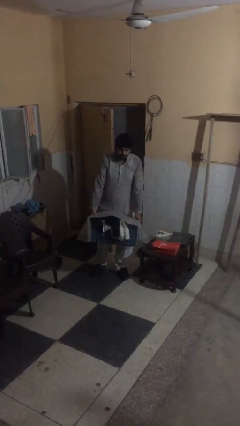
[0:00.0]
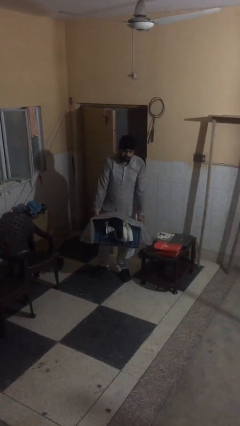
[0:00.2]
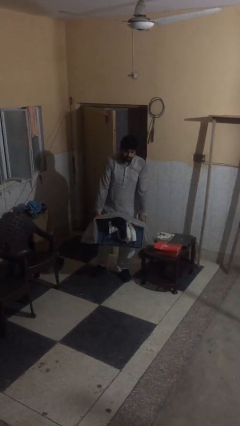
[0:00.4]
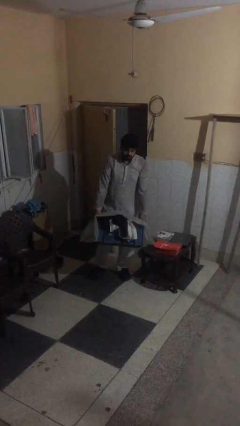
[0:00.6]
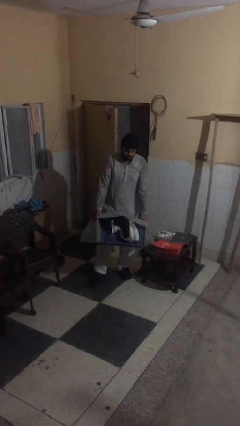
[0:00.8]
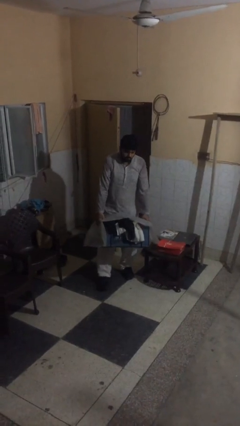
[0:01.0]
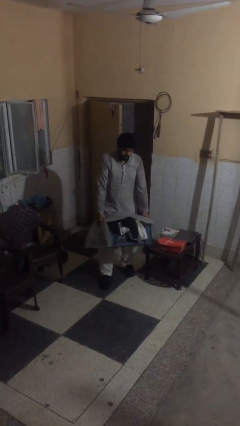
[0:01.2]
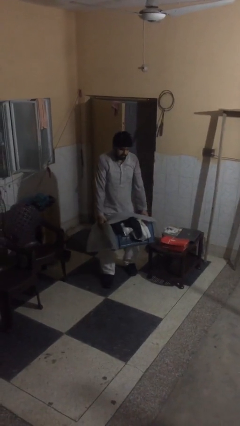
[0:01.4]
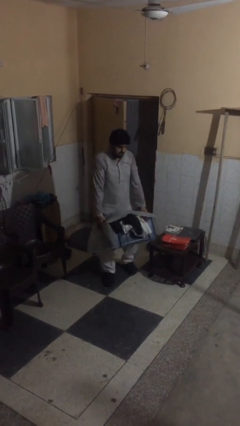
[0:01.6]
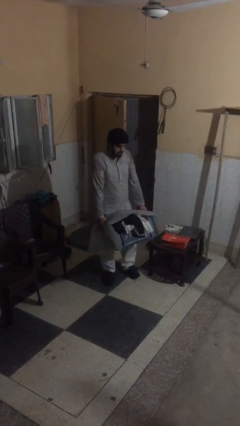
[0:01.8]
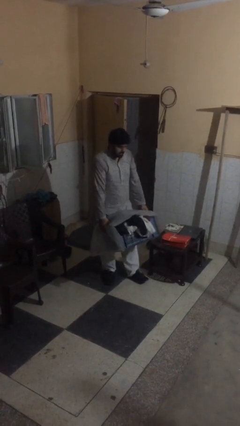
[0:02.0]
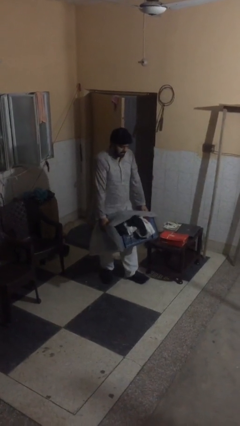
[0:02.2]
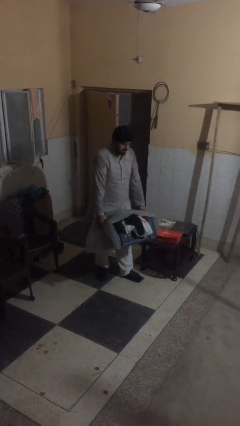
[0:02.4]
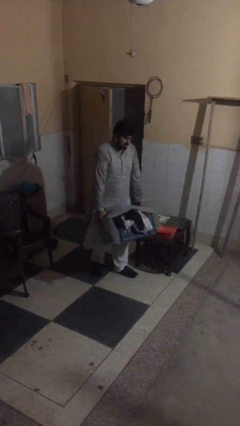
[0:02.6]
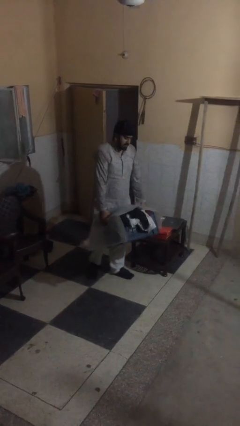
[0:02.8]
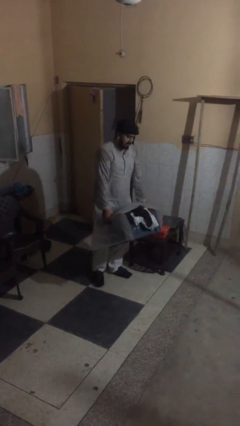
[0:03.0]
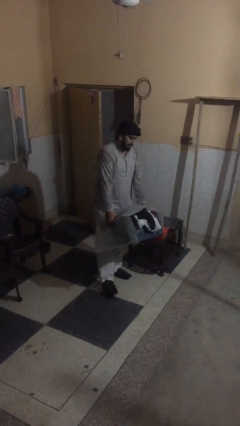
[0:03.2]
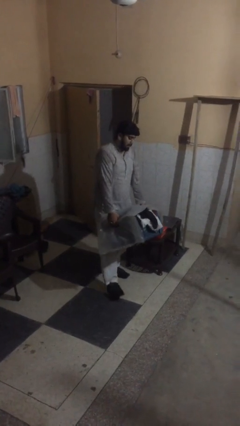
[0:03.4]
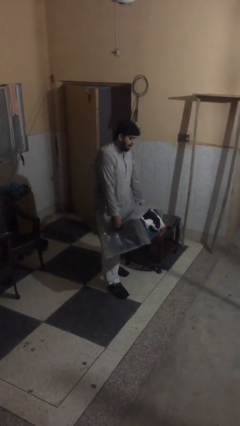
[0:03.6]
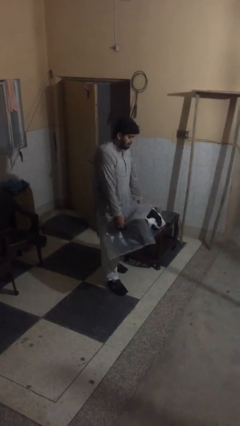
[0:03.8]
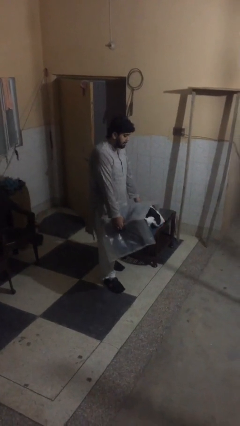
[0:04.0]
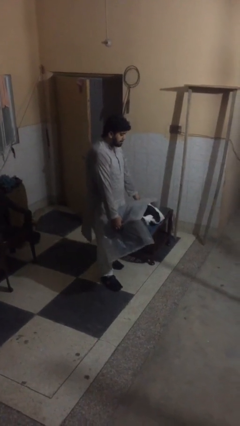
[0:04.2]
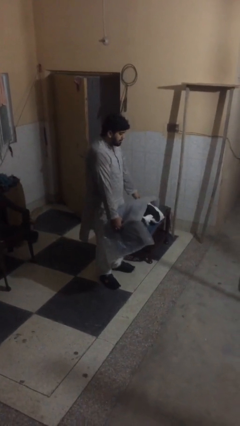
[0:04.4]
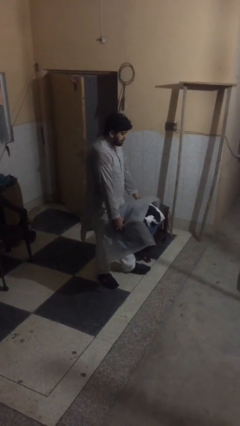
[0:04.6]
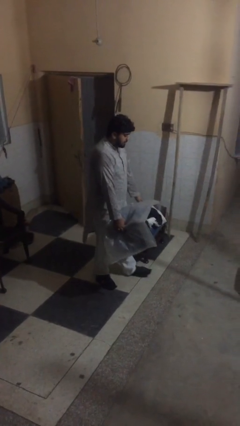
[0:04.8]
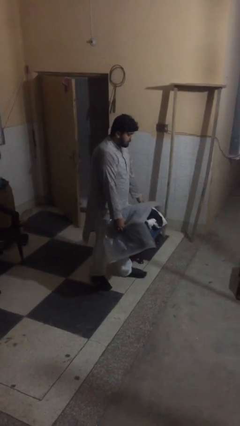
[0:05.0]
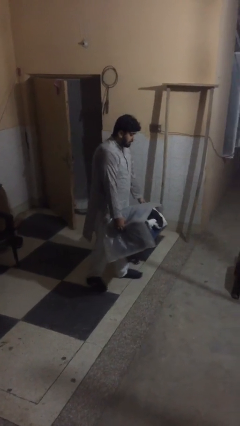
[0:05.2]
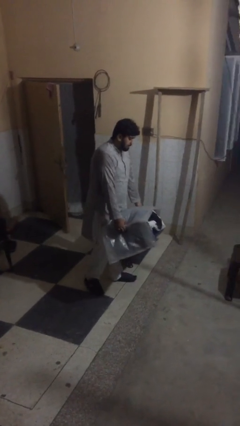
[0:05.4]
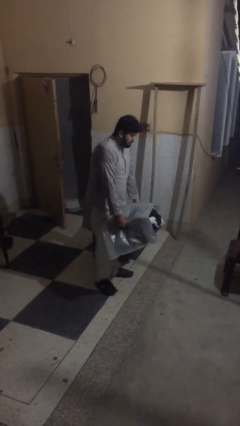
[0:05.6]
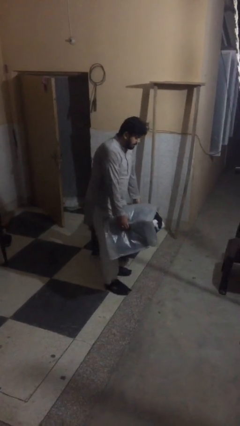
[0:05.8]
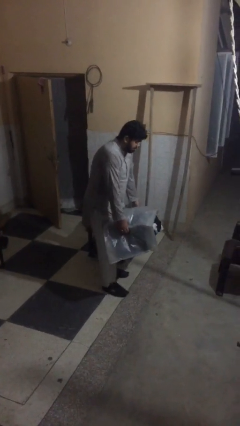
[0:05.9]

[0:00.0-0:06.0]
person carries heavy object

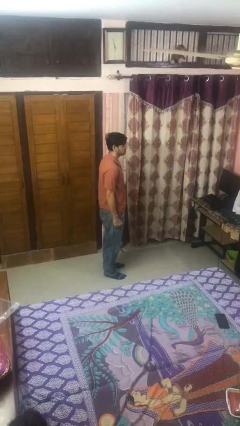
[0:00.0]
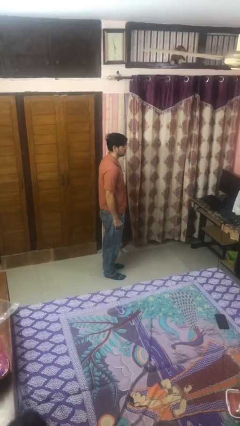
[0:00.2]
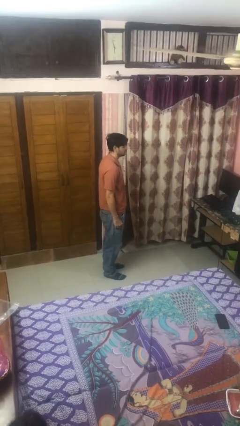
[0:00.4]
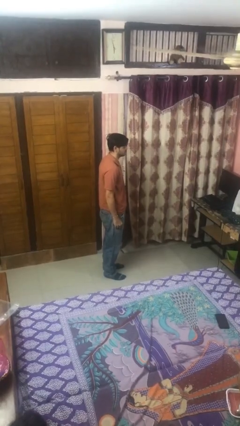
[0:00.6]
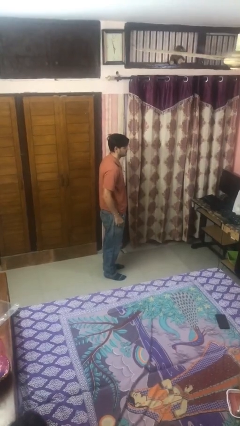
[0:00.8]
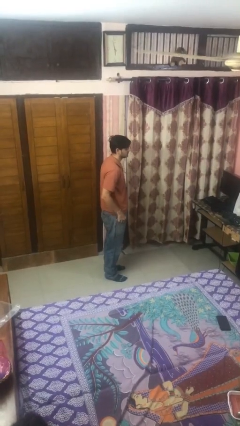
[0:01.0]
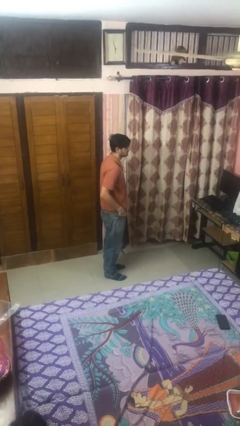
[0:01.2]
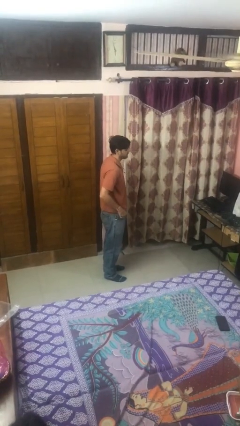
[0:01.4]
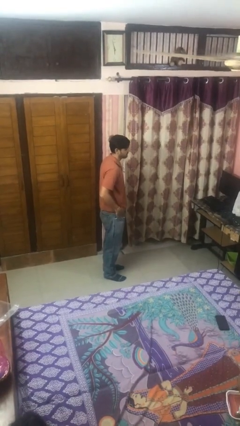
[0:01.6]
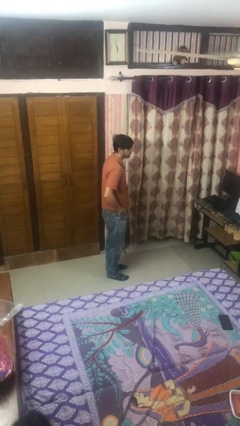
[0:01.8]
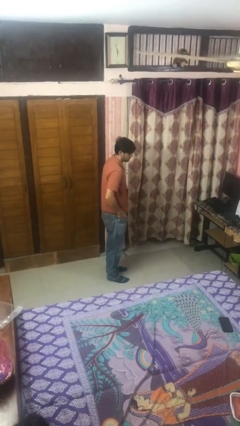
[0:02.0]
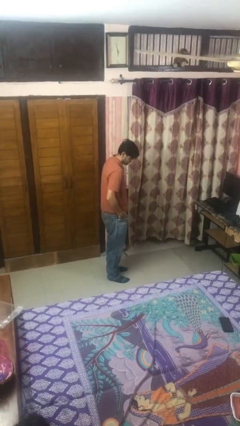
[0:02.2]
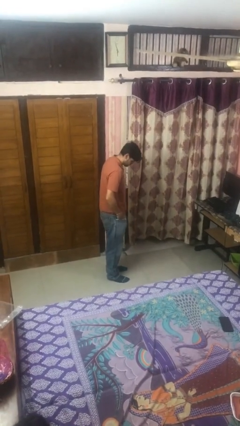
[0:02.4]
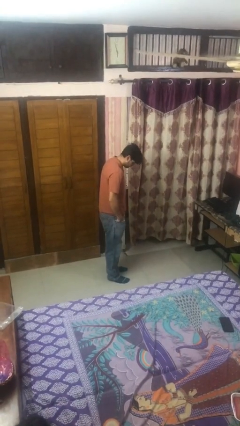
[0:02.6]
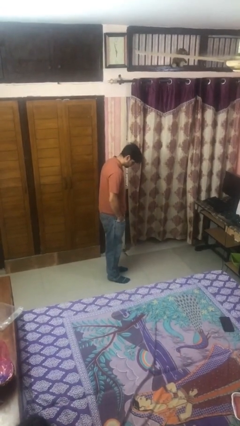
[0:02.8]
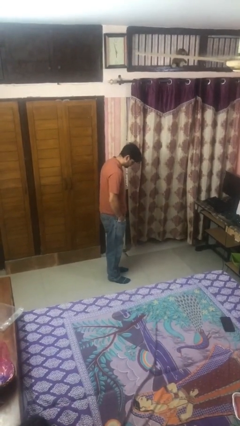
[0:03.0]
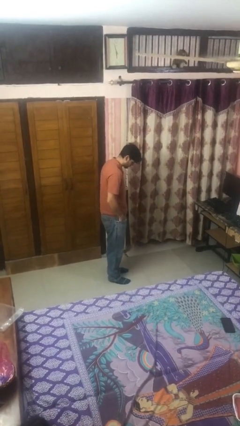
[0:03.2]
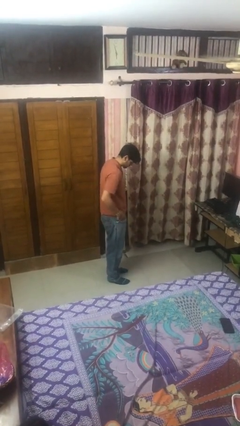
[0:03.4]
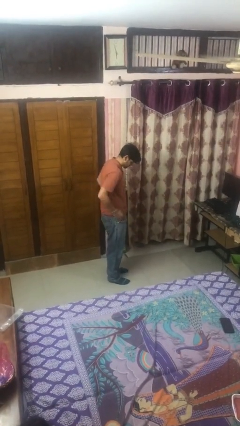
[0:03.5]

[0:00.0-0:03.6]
person puts hands in back pockets

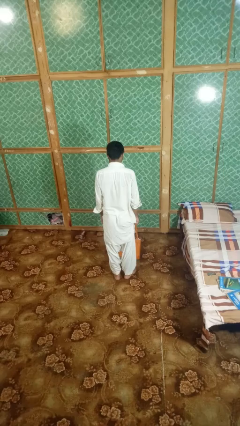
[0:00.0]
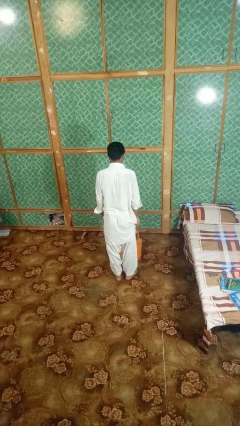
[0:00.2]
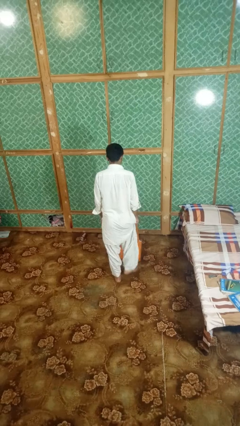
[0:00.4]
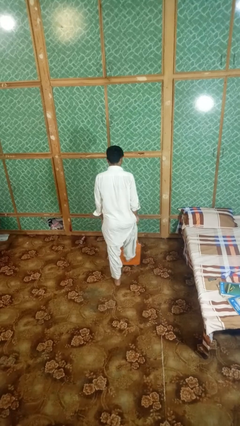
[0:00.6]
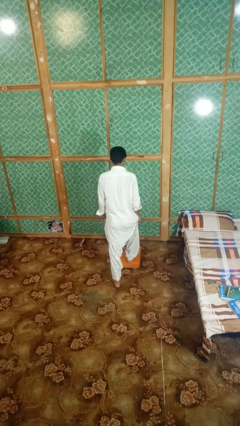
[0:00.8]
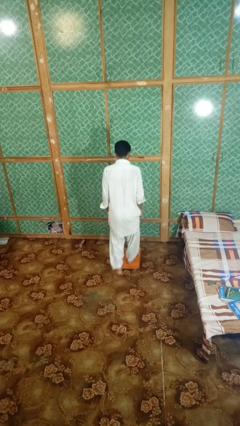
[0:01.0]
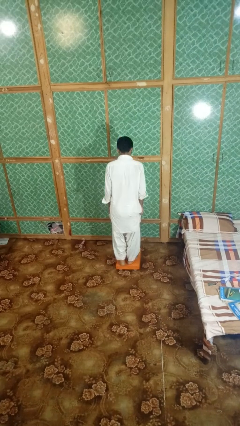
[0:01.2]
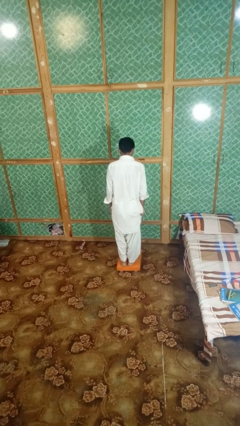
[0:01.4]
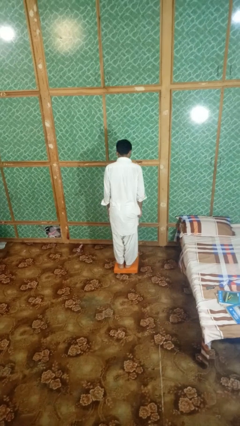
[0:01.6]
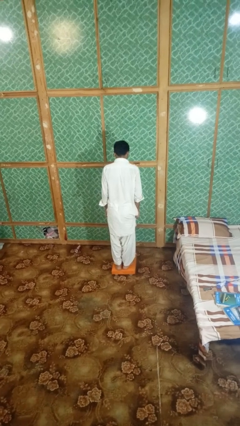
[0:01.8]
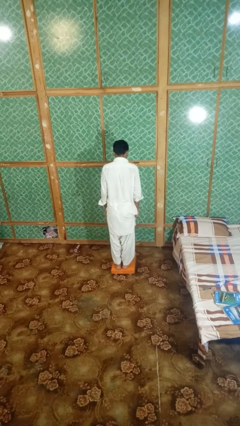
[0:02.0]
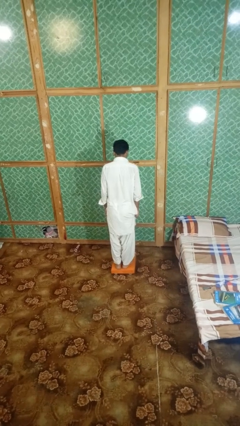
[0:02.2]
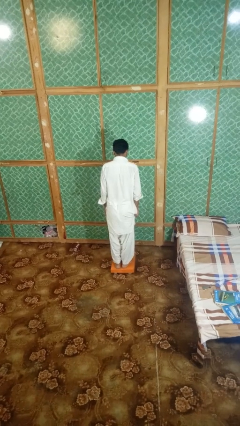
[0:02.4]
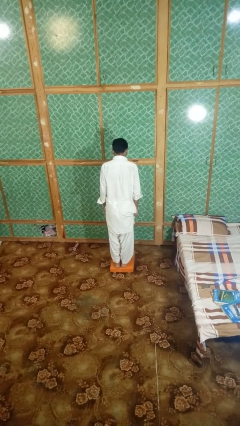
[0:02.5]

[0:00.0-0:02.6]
person uses bodyweight scale

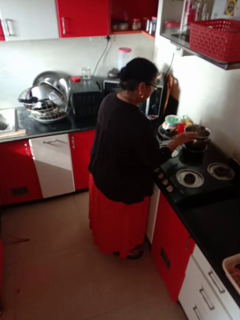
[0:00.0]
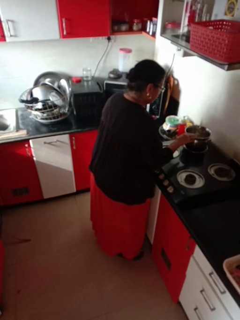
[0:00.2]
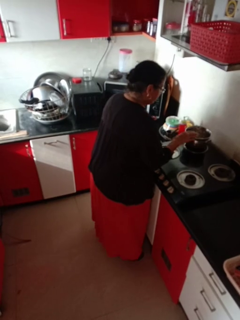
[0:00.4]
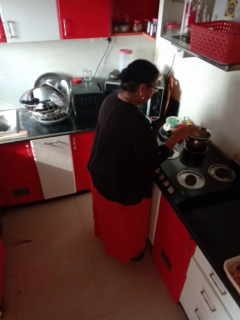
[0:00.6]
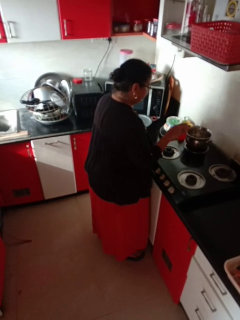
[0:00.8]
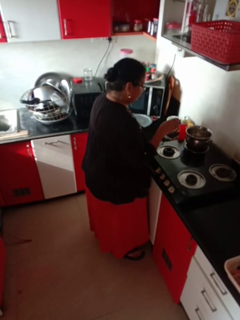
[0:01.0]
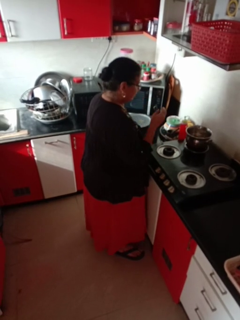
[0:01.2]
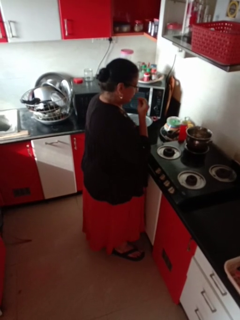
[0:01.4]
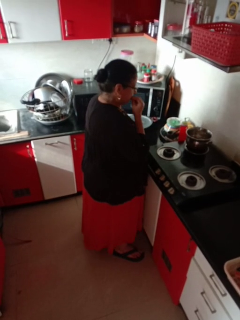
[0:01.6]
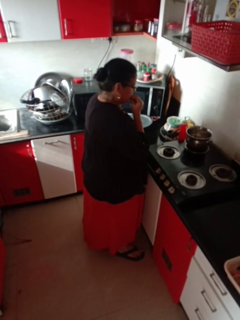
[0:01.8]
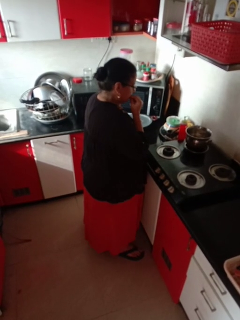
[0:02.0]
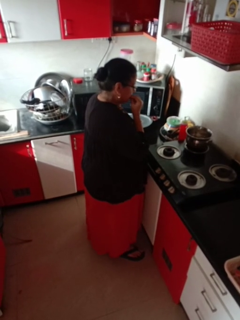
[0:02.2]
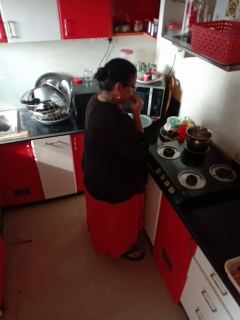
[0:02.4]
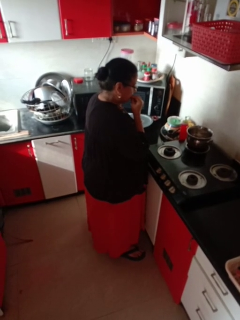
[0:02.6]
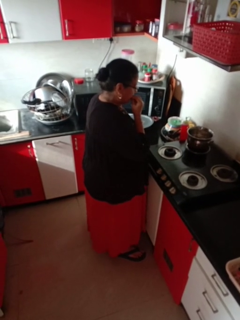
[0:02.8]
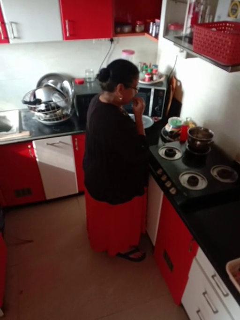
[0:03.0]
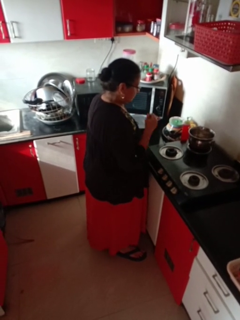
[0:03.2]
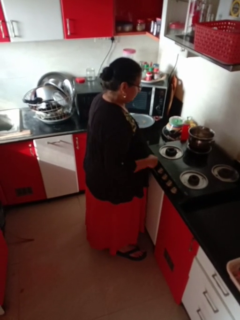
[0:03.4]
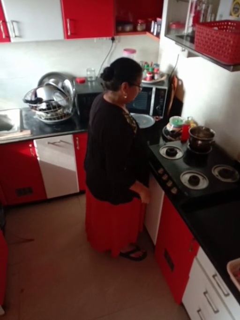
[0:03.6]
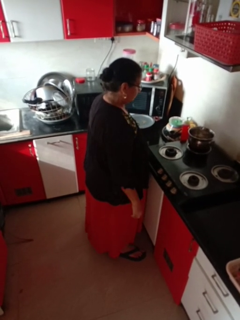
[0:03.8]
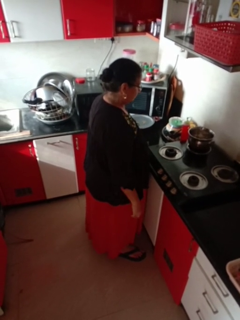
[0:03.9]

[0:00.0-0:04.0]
person burns hand

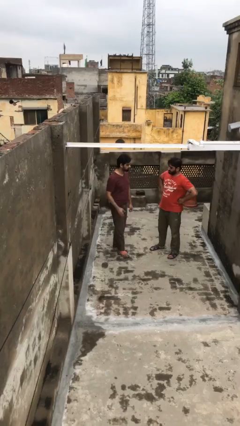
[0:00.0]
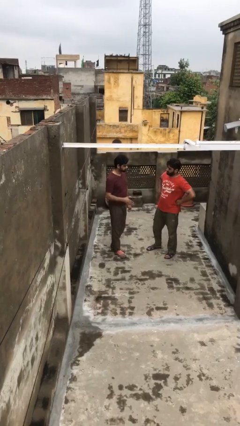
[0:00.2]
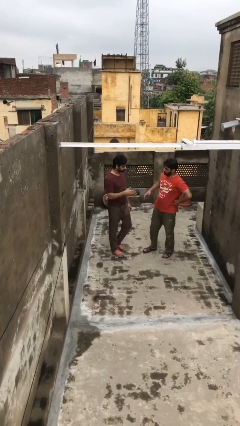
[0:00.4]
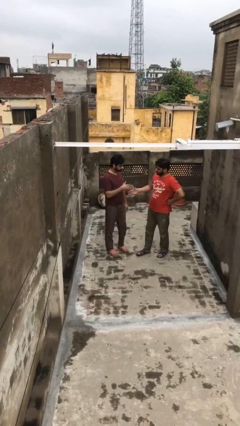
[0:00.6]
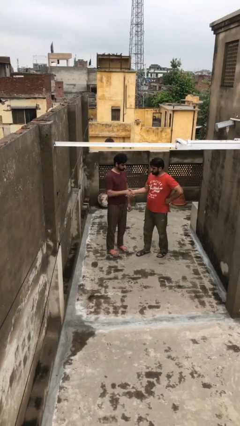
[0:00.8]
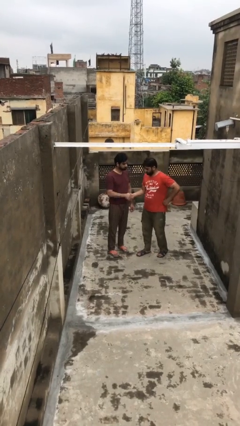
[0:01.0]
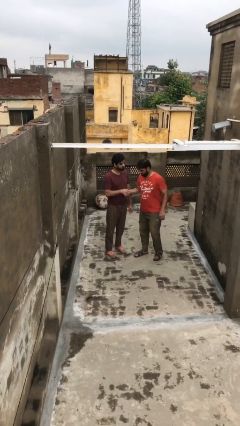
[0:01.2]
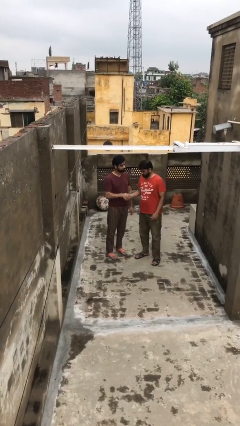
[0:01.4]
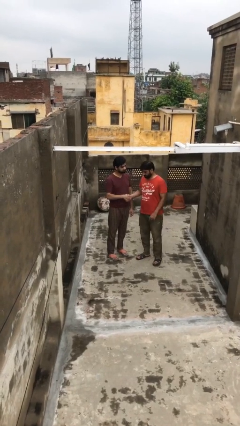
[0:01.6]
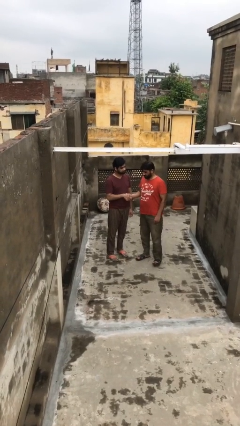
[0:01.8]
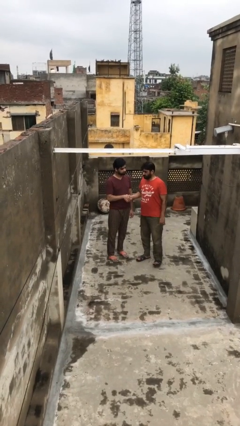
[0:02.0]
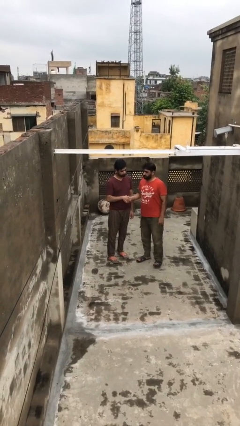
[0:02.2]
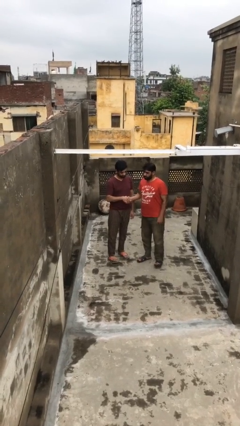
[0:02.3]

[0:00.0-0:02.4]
person shakes hand

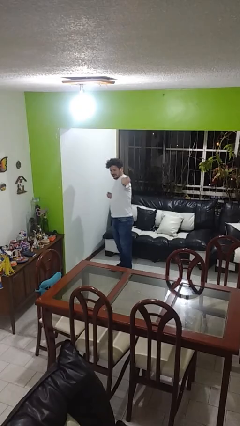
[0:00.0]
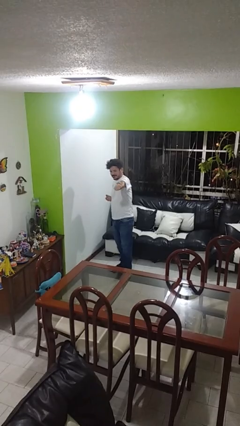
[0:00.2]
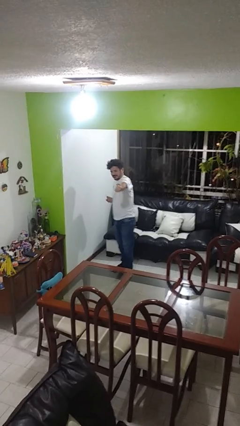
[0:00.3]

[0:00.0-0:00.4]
person karate chop
